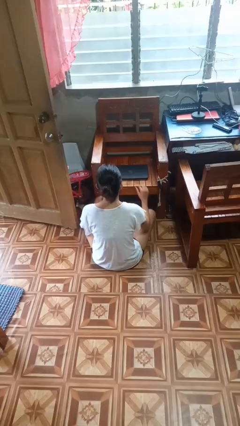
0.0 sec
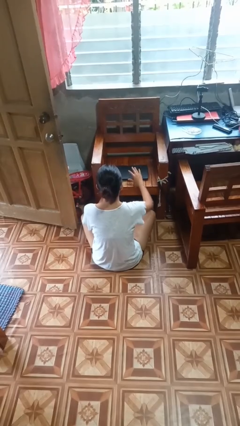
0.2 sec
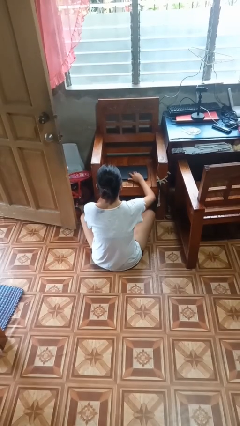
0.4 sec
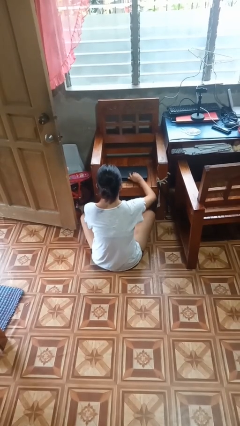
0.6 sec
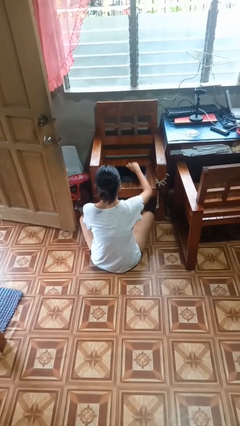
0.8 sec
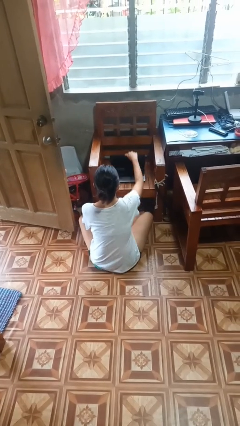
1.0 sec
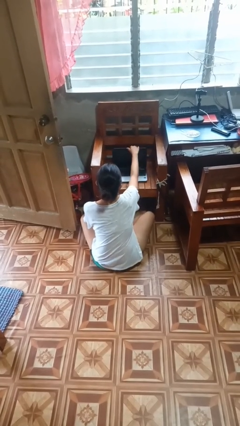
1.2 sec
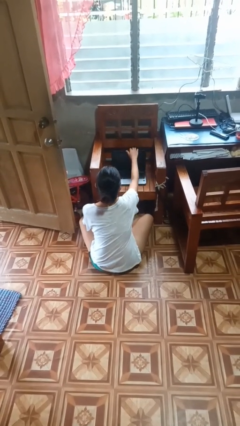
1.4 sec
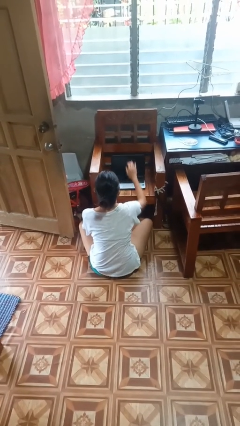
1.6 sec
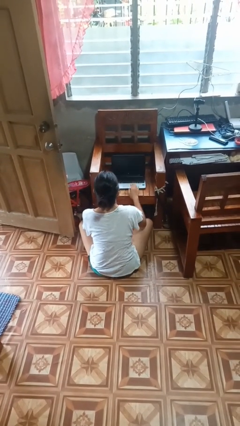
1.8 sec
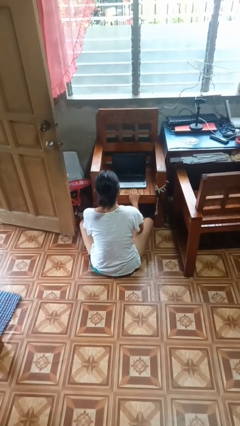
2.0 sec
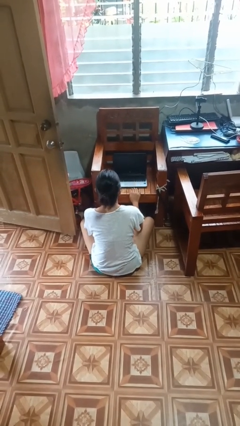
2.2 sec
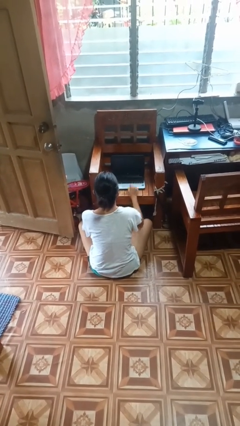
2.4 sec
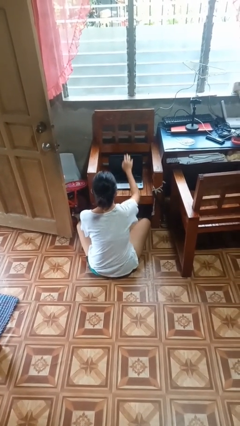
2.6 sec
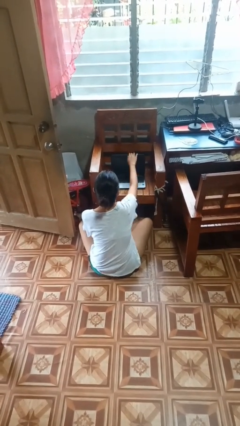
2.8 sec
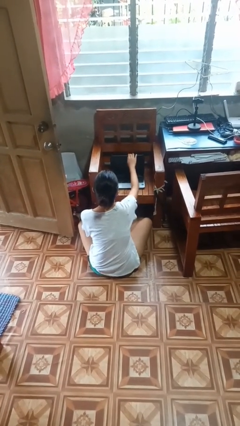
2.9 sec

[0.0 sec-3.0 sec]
person opens laptop

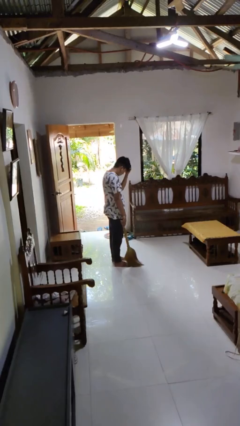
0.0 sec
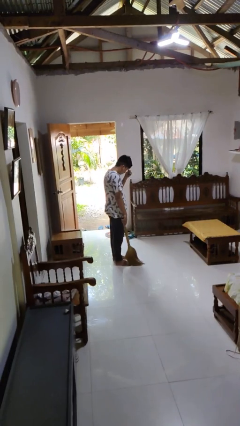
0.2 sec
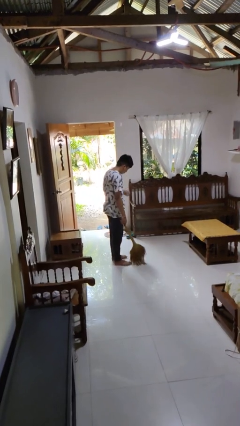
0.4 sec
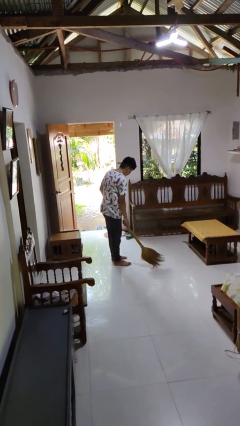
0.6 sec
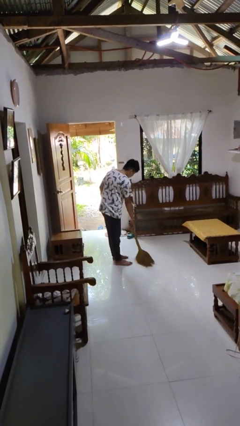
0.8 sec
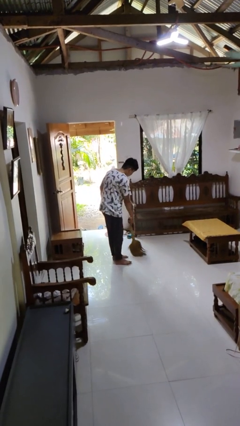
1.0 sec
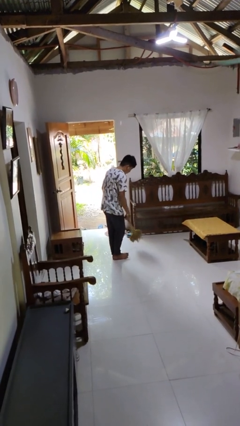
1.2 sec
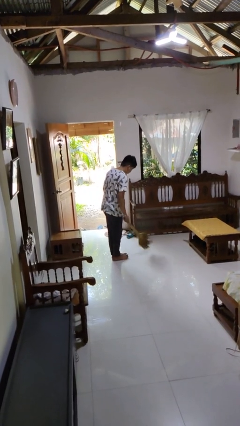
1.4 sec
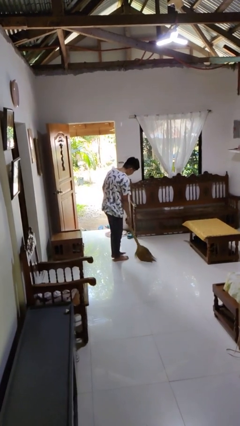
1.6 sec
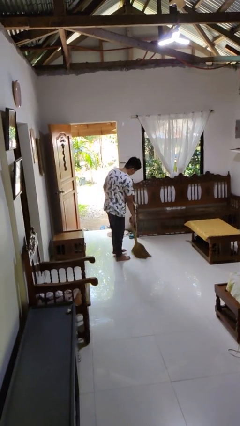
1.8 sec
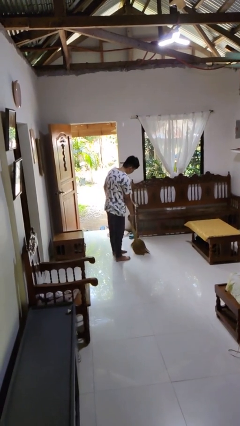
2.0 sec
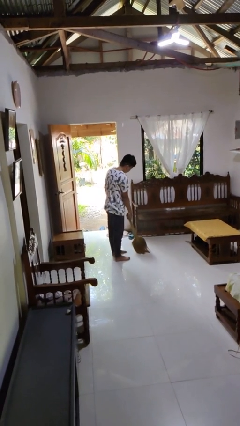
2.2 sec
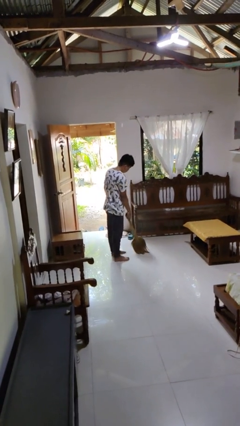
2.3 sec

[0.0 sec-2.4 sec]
person sweeps floor

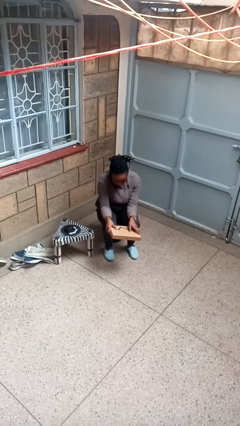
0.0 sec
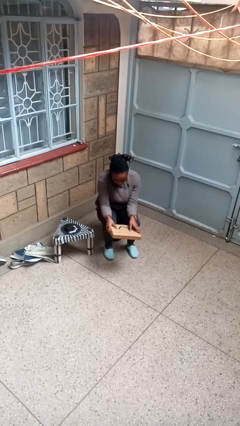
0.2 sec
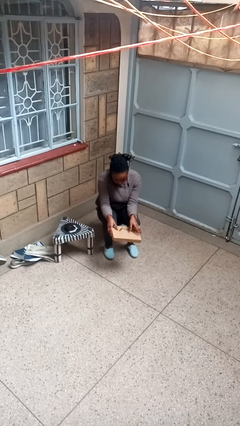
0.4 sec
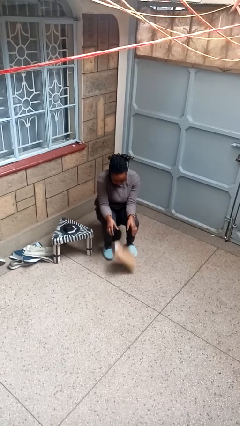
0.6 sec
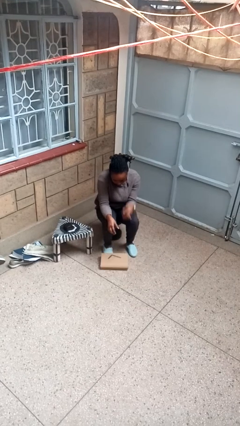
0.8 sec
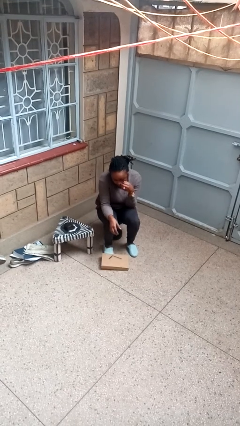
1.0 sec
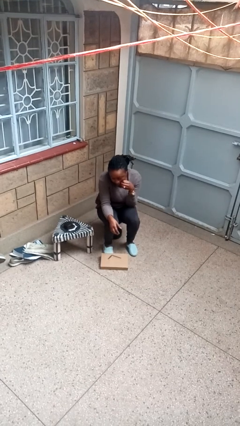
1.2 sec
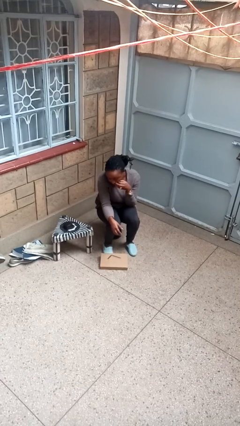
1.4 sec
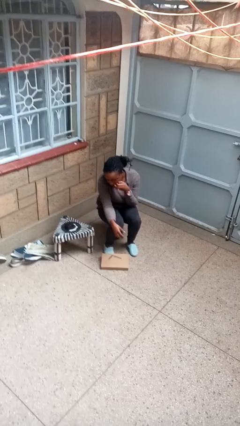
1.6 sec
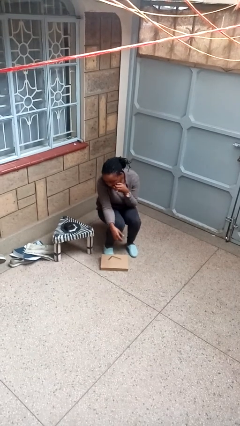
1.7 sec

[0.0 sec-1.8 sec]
person drops object

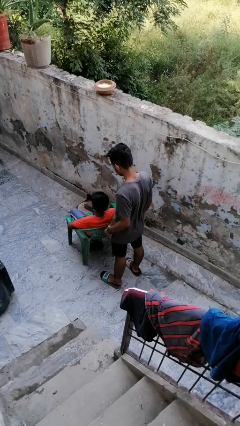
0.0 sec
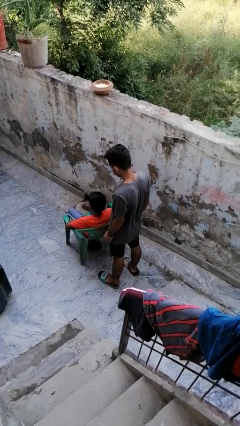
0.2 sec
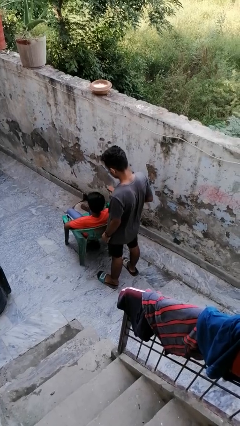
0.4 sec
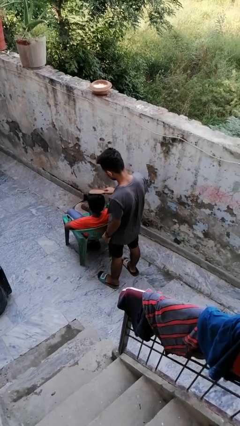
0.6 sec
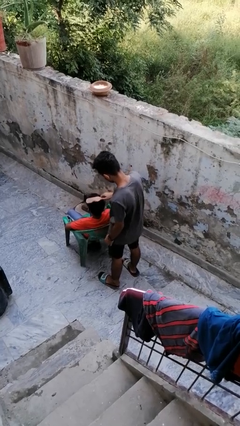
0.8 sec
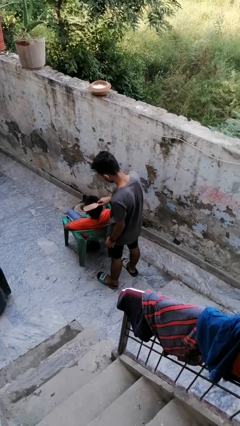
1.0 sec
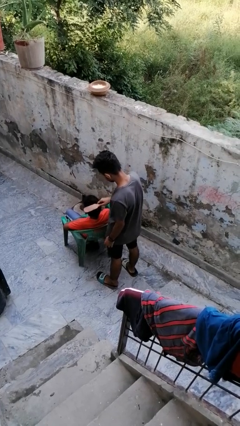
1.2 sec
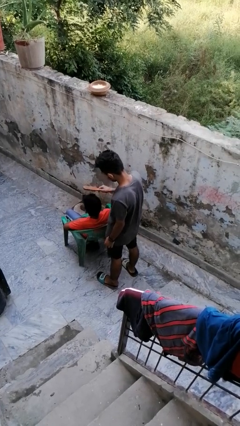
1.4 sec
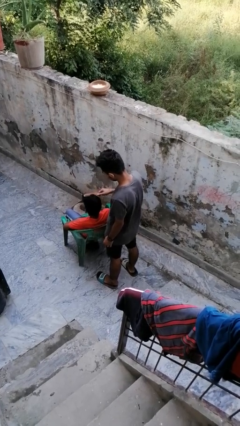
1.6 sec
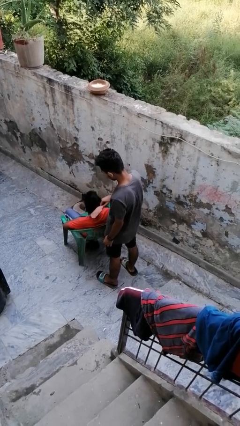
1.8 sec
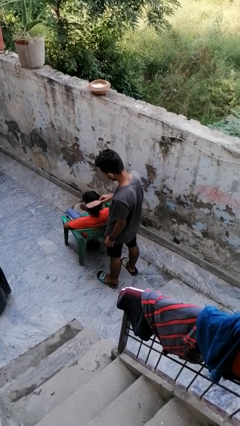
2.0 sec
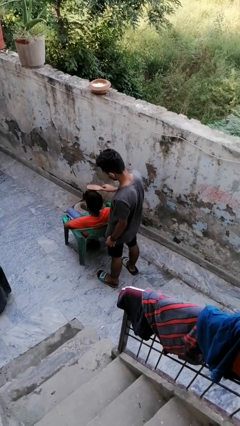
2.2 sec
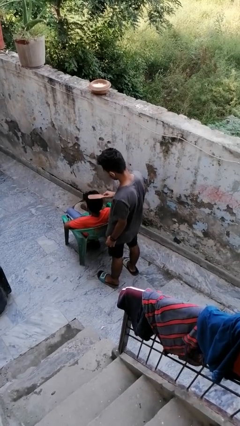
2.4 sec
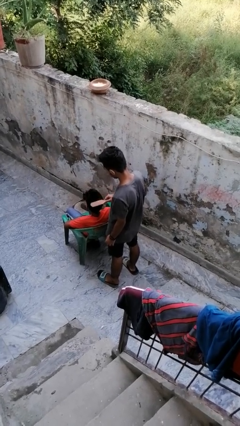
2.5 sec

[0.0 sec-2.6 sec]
person brushes hair of person

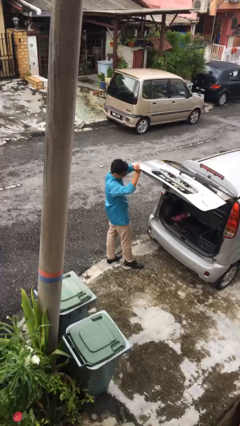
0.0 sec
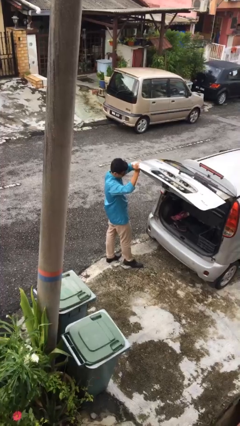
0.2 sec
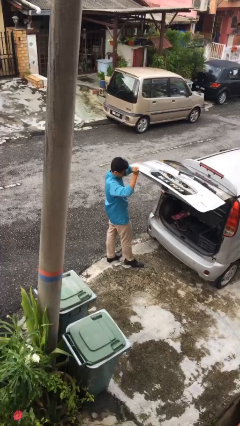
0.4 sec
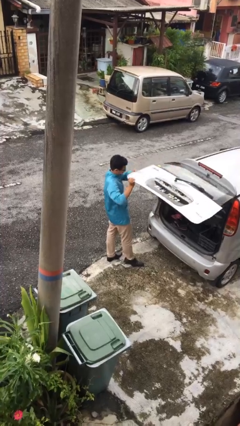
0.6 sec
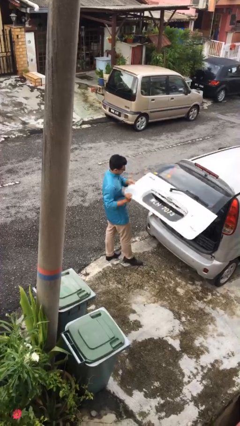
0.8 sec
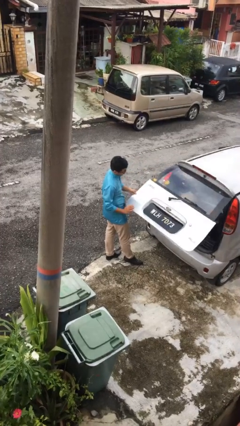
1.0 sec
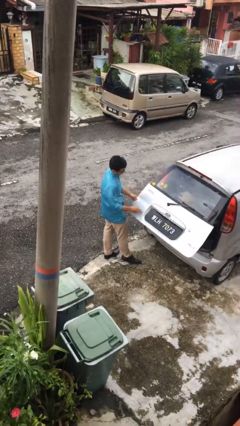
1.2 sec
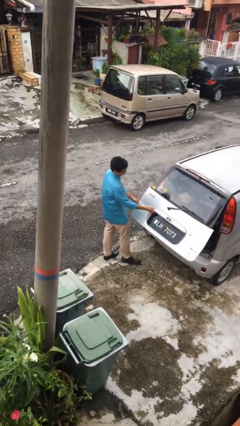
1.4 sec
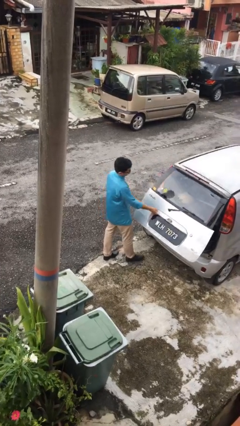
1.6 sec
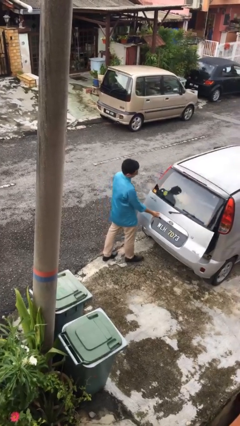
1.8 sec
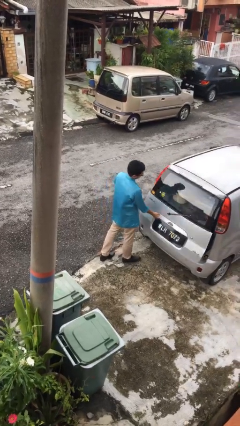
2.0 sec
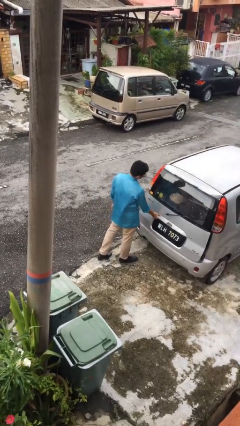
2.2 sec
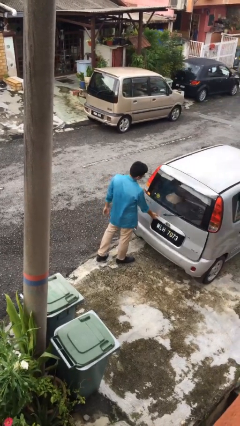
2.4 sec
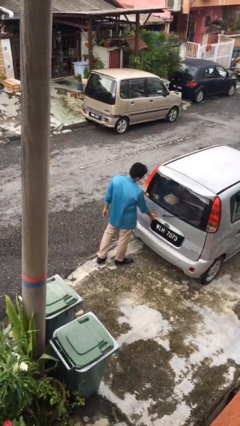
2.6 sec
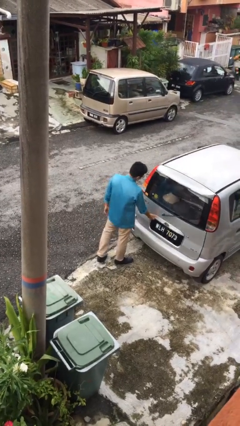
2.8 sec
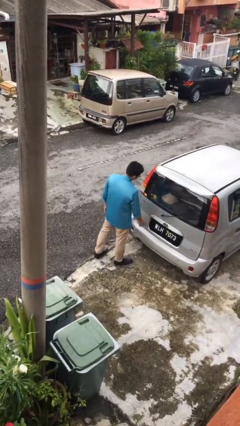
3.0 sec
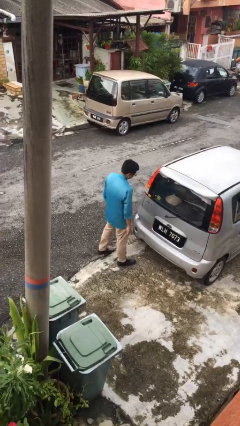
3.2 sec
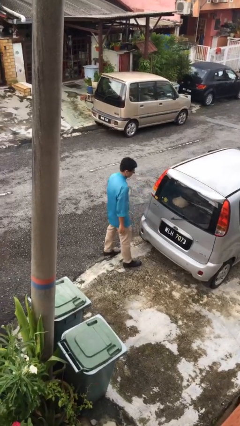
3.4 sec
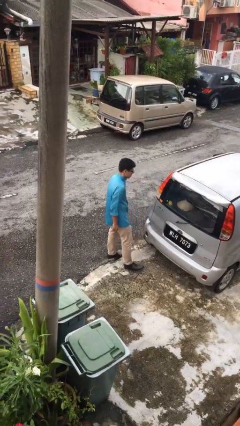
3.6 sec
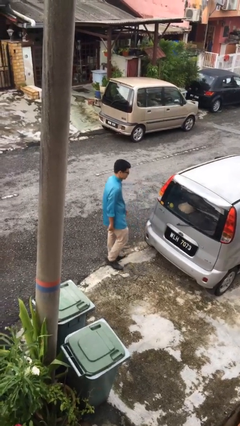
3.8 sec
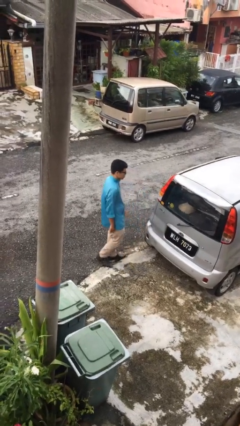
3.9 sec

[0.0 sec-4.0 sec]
person closes car trunk

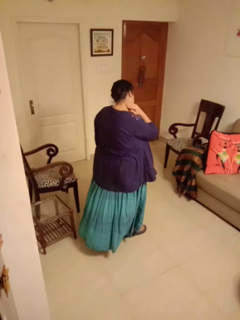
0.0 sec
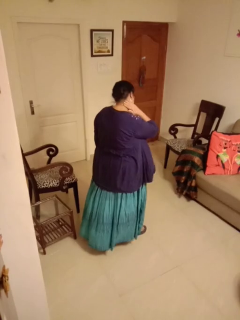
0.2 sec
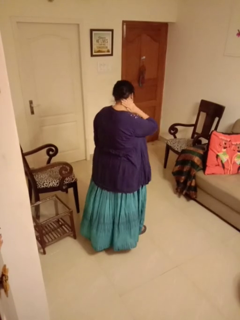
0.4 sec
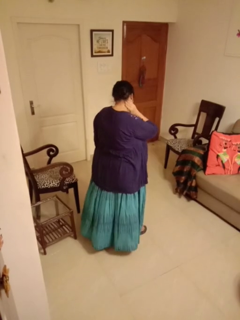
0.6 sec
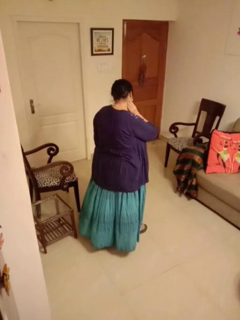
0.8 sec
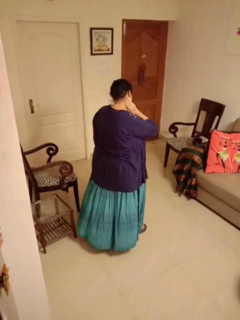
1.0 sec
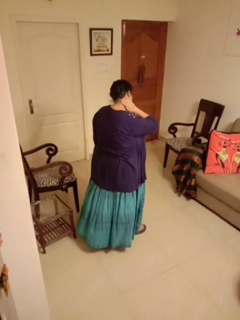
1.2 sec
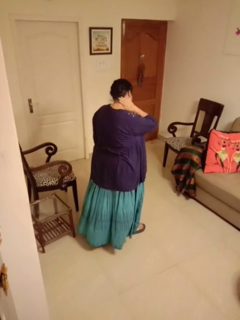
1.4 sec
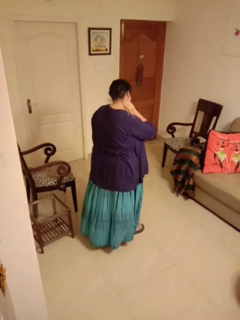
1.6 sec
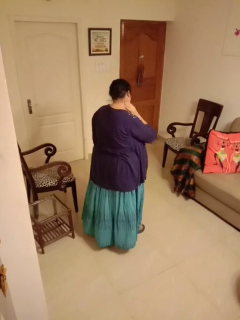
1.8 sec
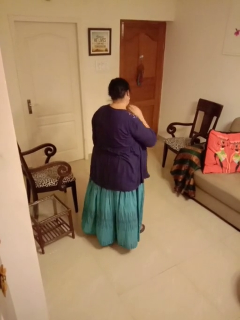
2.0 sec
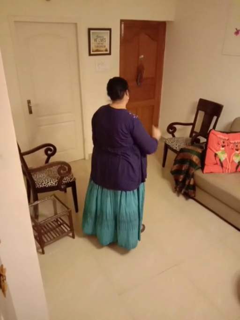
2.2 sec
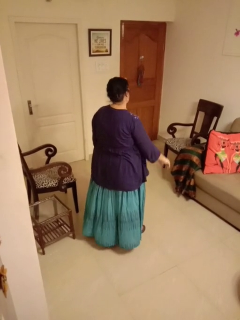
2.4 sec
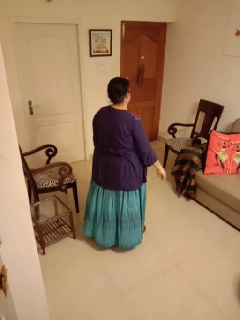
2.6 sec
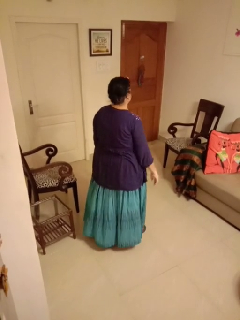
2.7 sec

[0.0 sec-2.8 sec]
person rubs neck

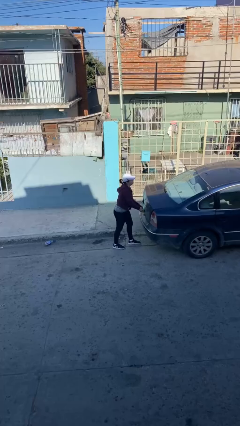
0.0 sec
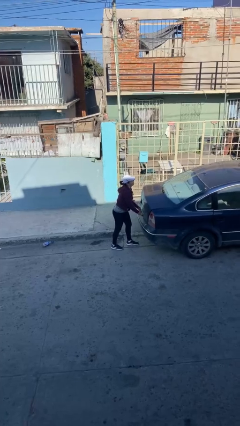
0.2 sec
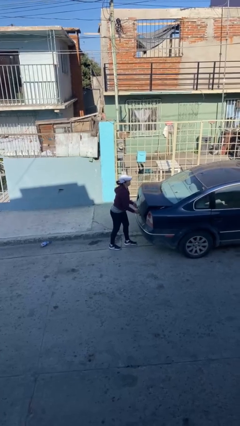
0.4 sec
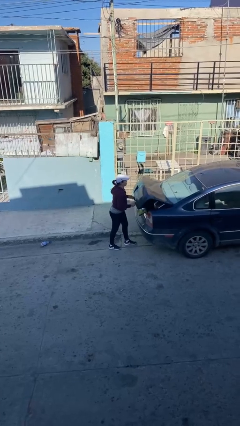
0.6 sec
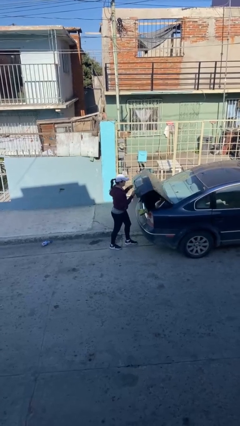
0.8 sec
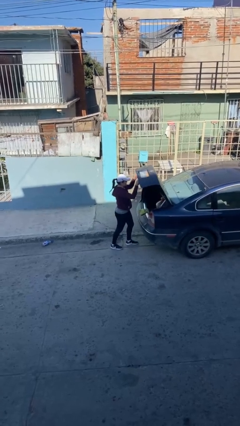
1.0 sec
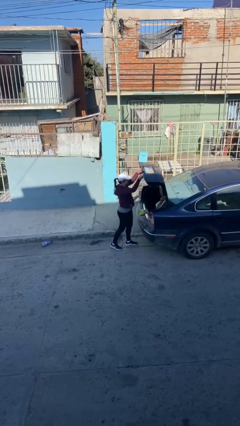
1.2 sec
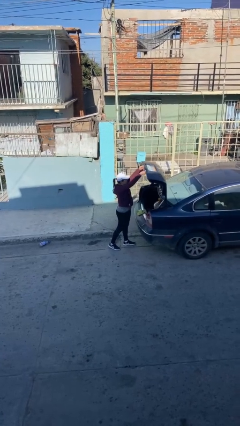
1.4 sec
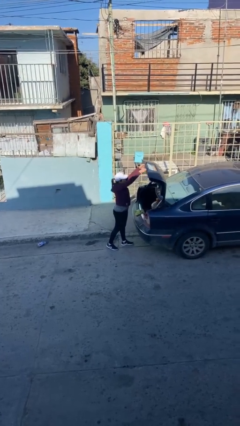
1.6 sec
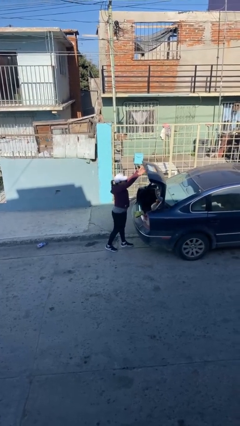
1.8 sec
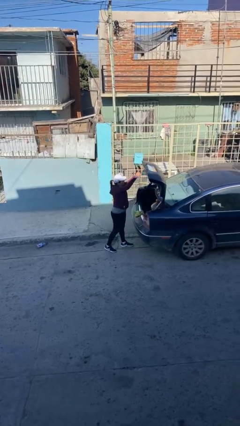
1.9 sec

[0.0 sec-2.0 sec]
person opens car trunk
